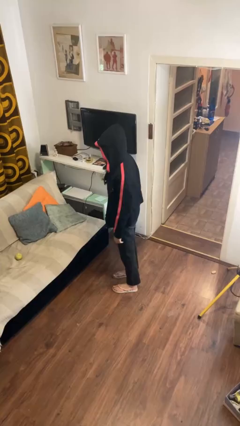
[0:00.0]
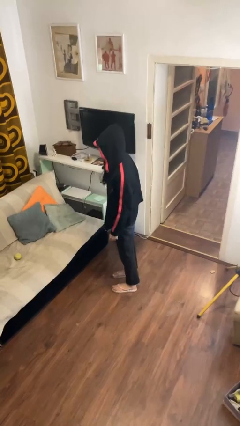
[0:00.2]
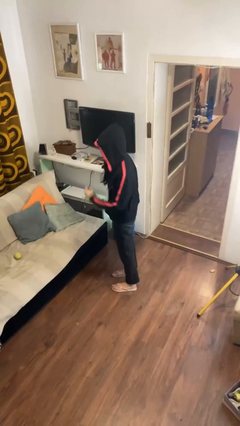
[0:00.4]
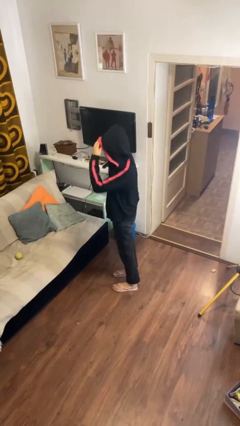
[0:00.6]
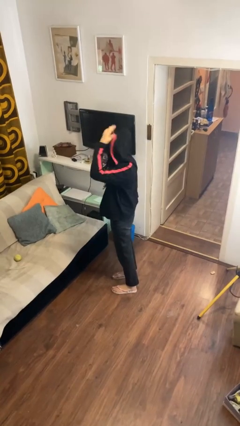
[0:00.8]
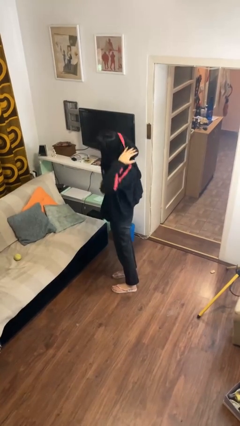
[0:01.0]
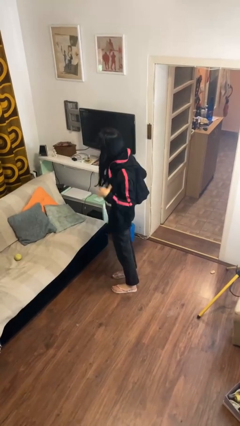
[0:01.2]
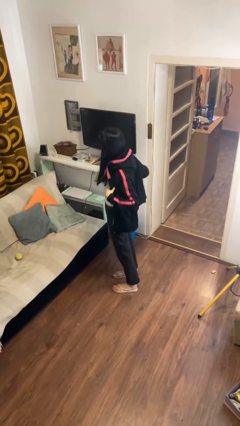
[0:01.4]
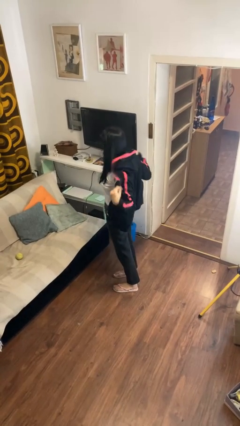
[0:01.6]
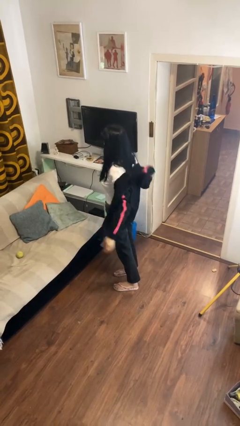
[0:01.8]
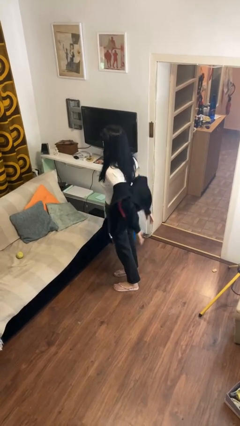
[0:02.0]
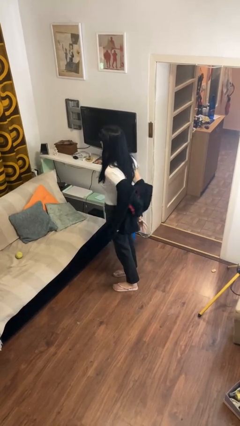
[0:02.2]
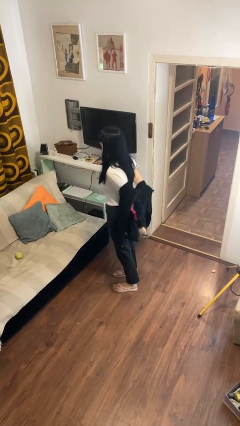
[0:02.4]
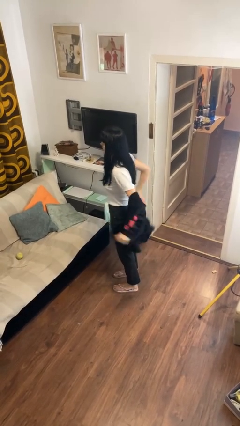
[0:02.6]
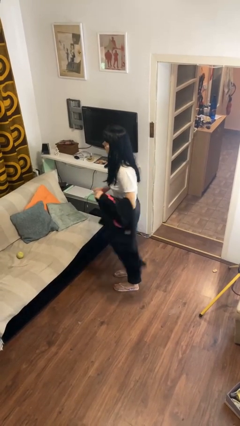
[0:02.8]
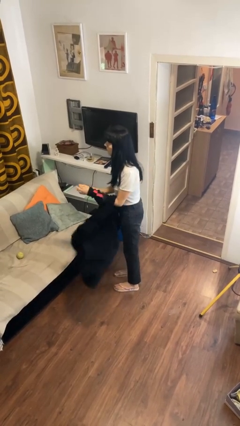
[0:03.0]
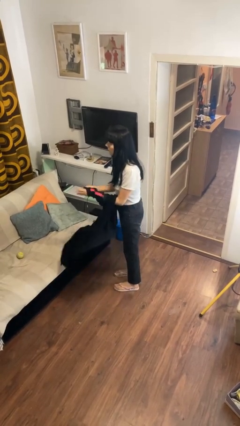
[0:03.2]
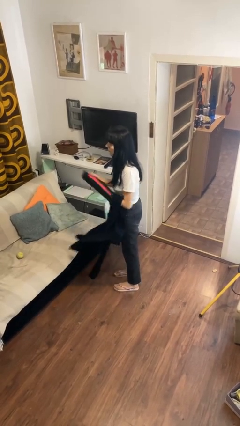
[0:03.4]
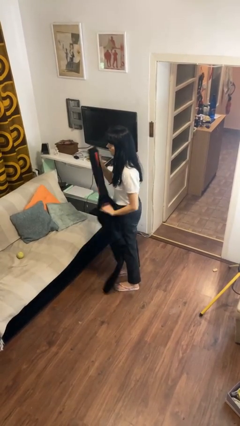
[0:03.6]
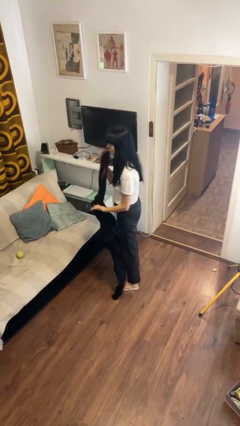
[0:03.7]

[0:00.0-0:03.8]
person takes off hoodie

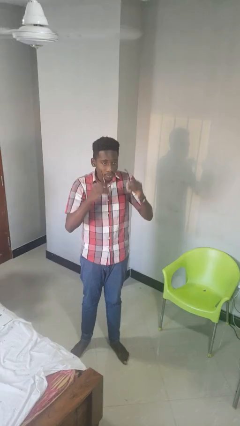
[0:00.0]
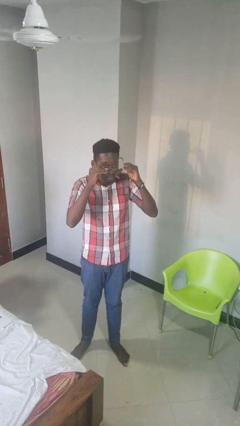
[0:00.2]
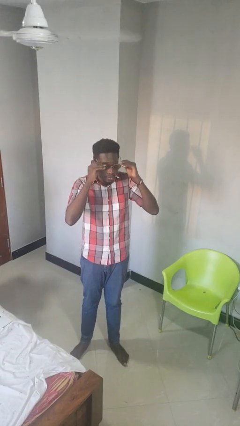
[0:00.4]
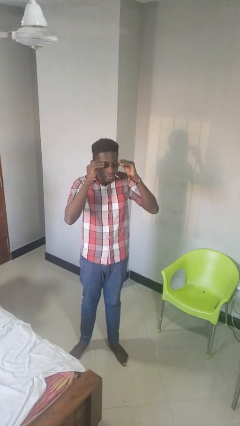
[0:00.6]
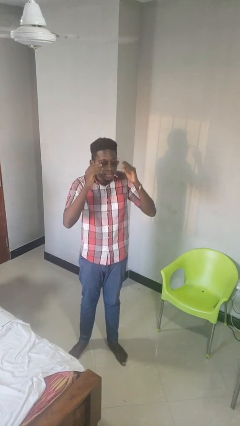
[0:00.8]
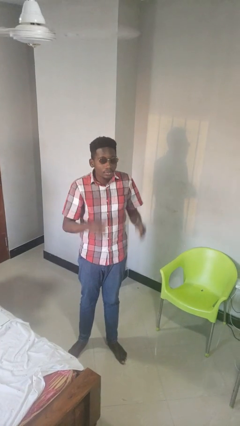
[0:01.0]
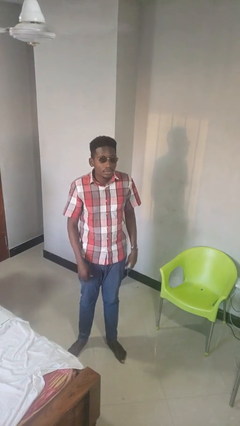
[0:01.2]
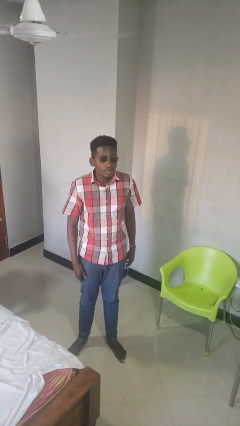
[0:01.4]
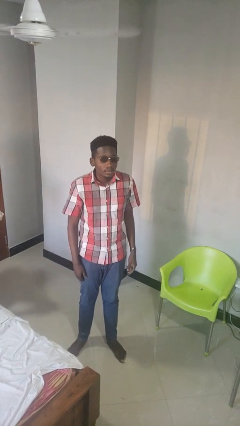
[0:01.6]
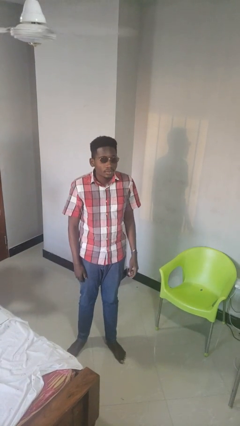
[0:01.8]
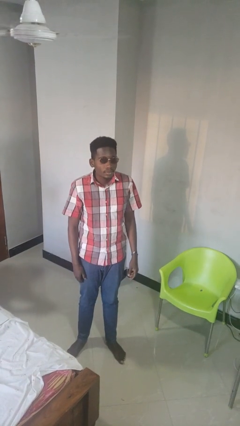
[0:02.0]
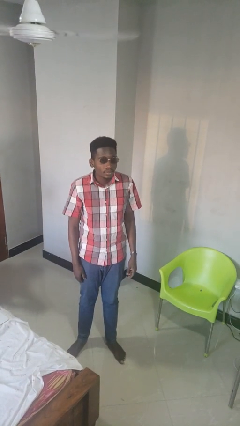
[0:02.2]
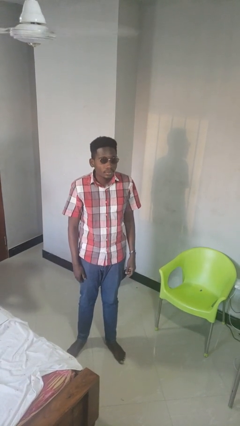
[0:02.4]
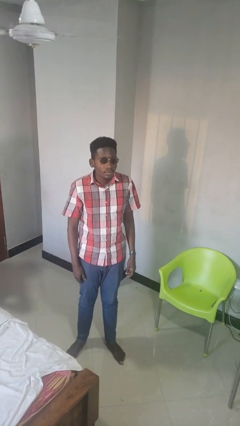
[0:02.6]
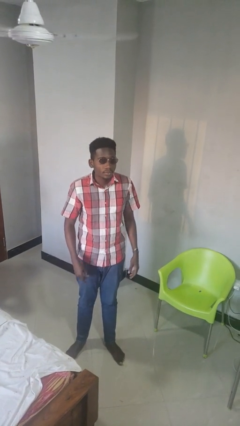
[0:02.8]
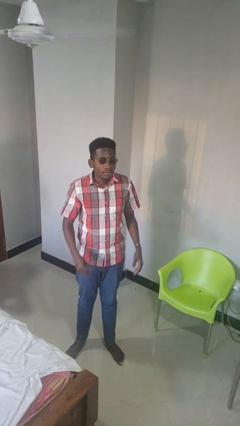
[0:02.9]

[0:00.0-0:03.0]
person puts on sunglasses

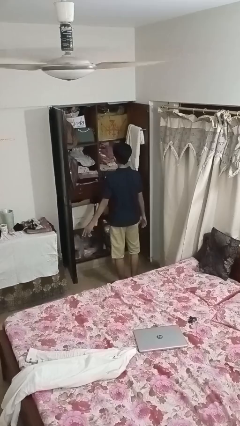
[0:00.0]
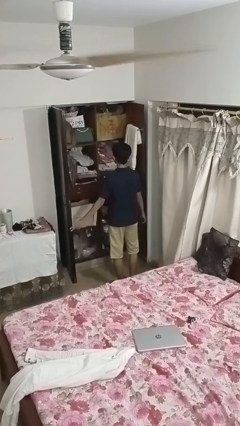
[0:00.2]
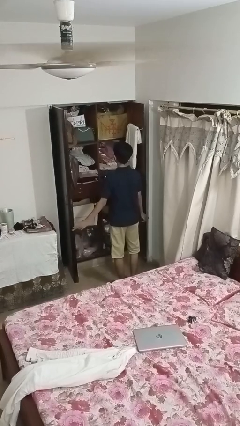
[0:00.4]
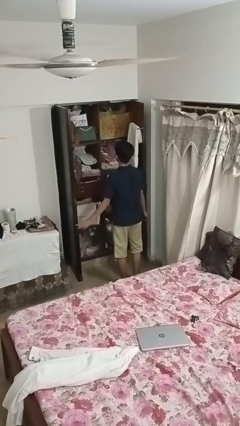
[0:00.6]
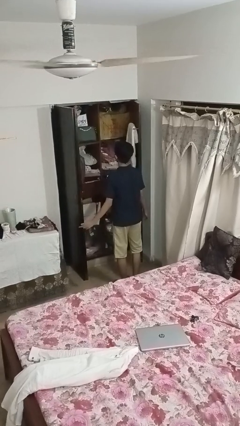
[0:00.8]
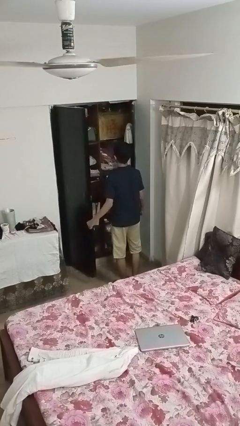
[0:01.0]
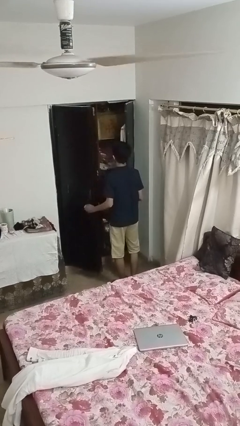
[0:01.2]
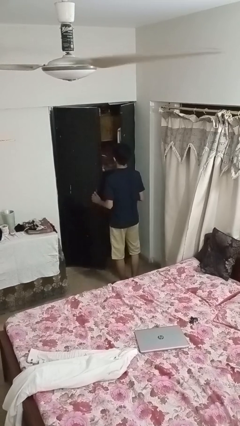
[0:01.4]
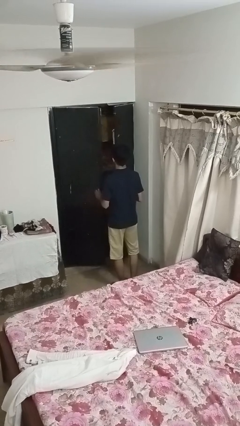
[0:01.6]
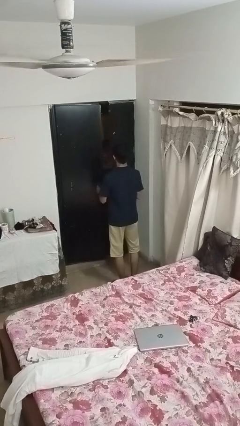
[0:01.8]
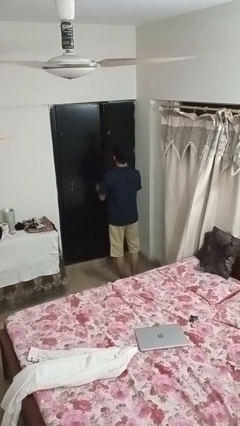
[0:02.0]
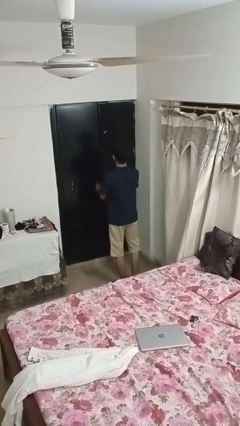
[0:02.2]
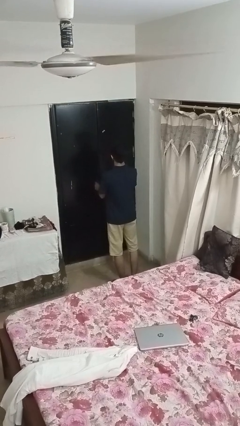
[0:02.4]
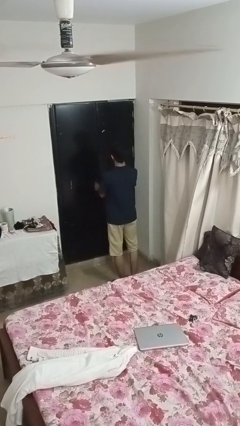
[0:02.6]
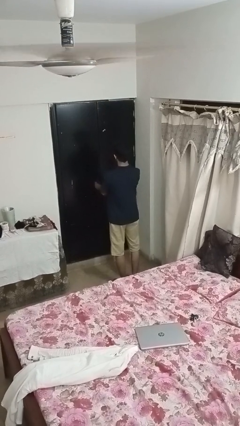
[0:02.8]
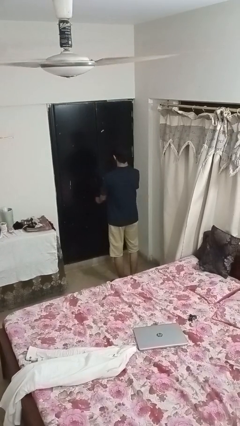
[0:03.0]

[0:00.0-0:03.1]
person closes closet door

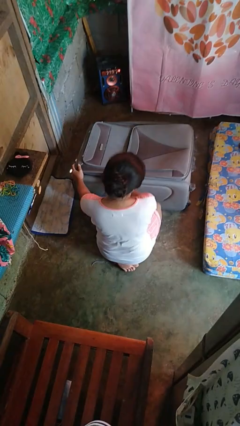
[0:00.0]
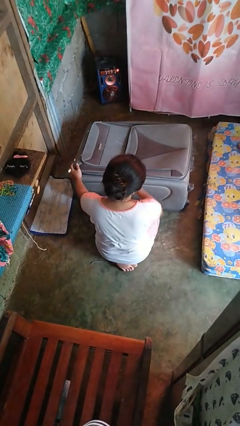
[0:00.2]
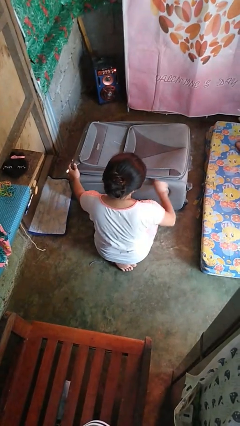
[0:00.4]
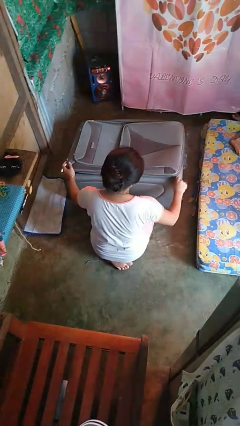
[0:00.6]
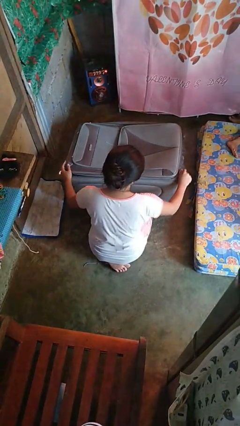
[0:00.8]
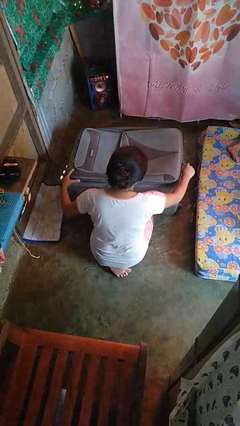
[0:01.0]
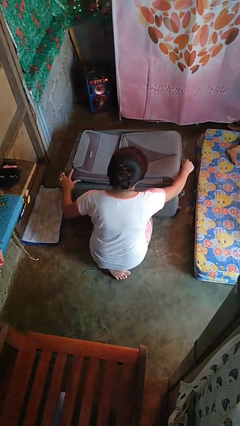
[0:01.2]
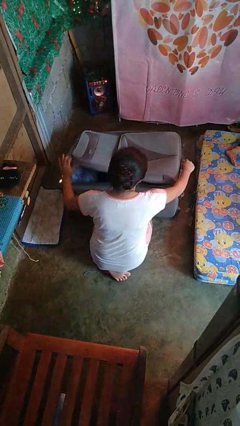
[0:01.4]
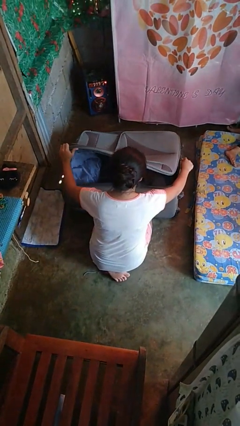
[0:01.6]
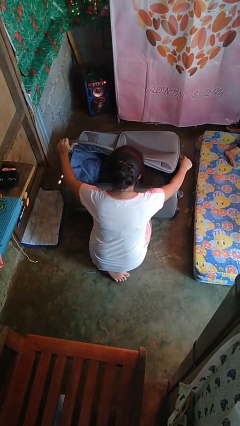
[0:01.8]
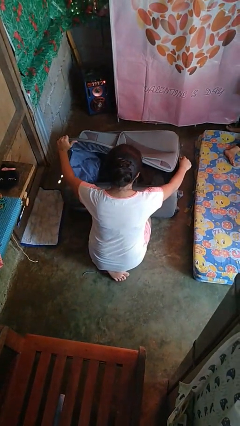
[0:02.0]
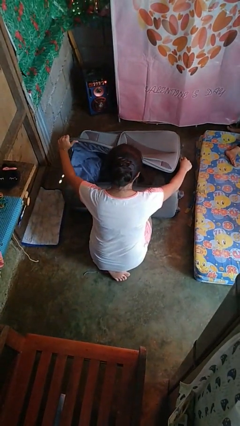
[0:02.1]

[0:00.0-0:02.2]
person opens suitcase

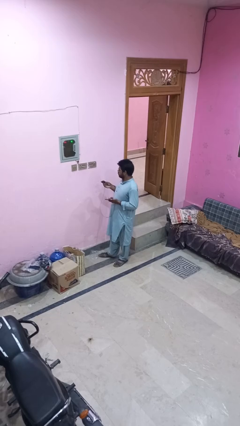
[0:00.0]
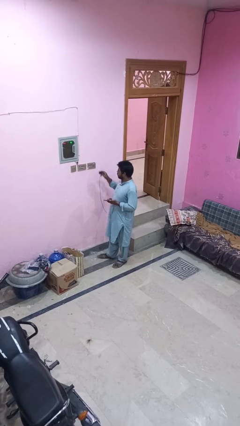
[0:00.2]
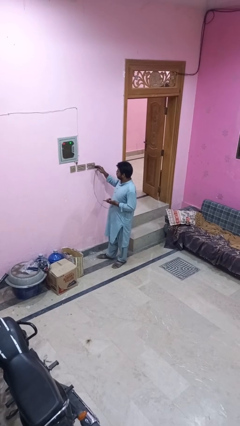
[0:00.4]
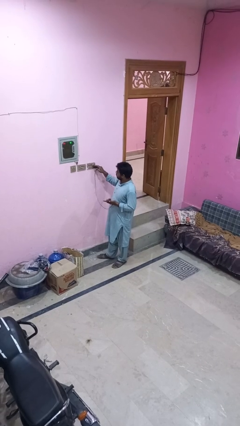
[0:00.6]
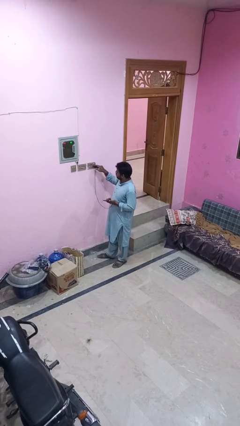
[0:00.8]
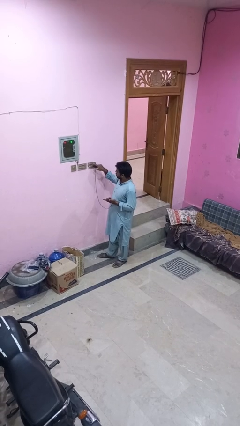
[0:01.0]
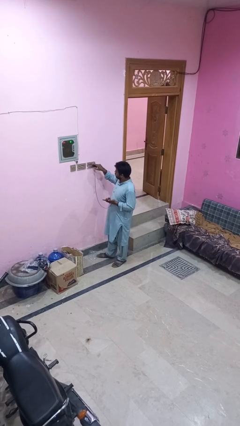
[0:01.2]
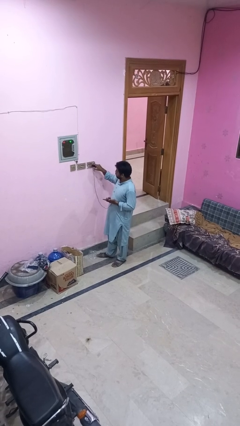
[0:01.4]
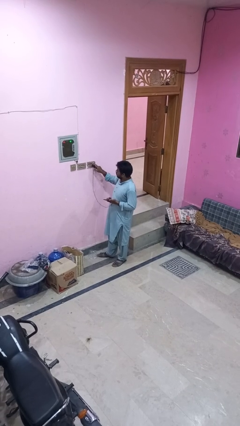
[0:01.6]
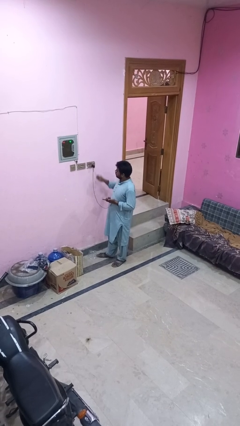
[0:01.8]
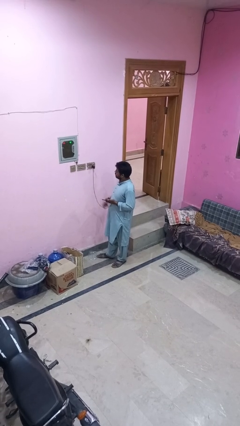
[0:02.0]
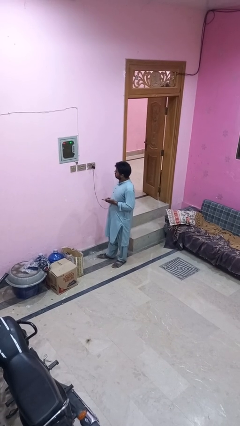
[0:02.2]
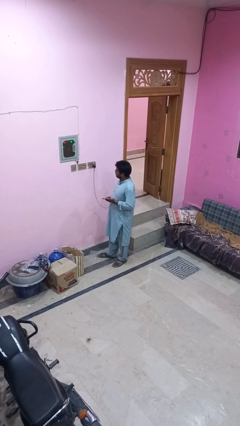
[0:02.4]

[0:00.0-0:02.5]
person plugs into electrical socket

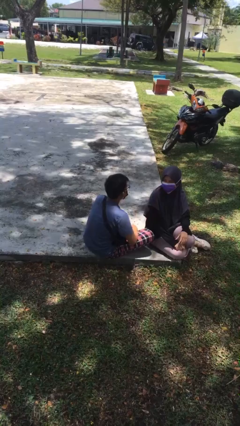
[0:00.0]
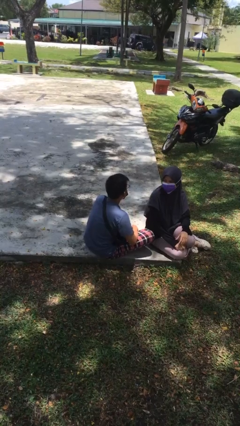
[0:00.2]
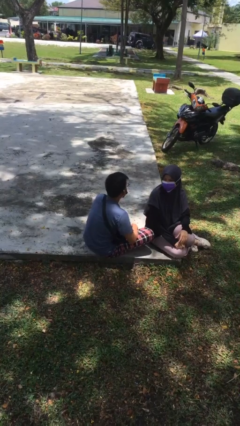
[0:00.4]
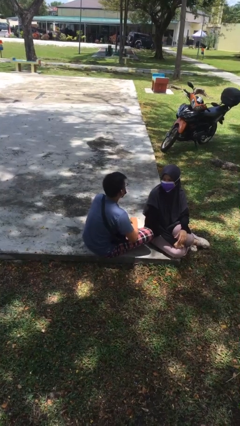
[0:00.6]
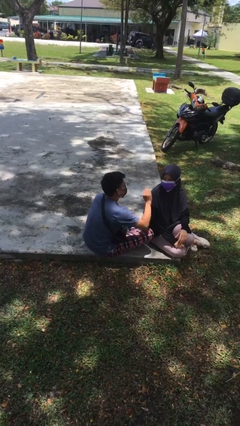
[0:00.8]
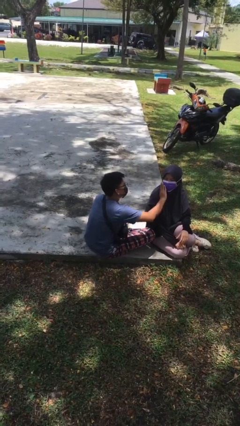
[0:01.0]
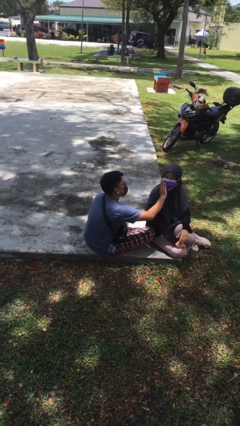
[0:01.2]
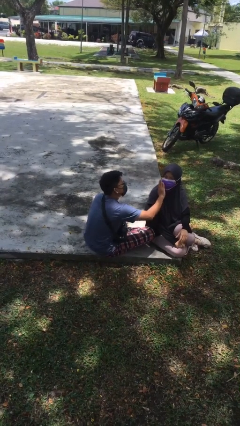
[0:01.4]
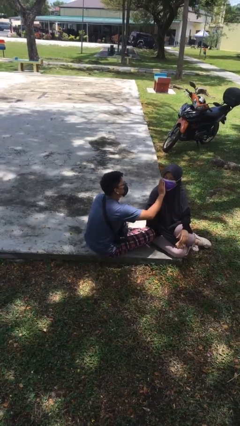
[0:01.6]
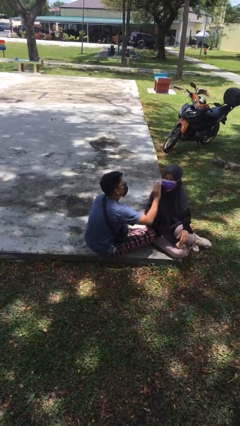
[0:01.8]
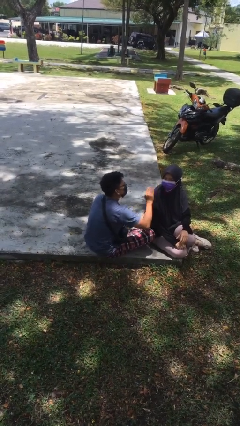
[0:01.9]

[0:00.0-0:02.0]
person touches face of person

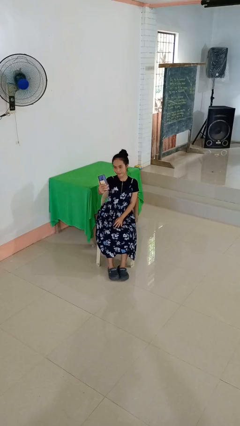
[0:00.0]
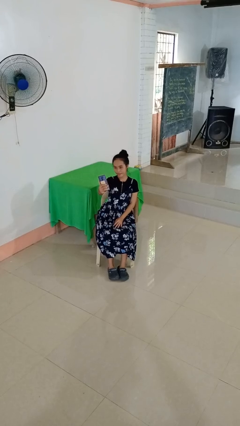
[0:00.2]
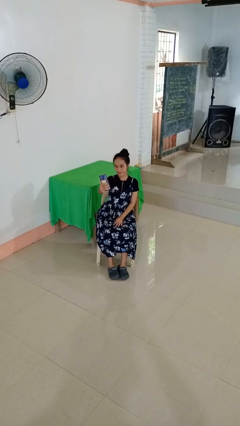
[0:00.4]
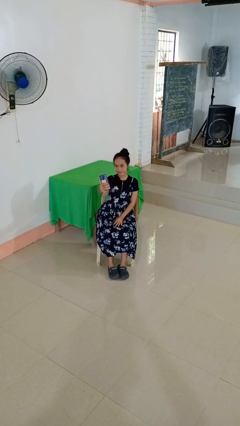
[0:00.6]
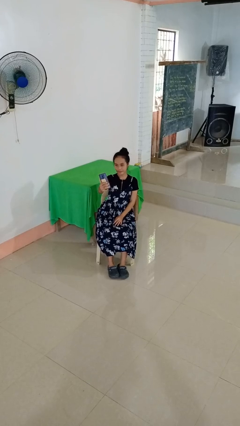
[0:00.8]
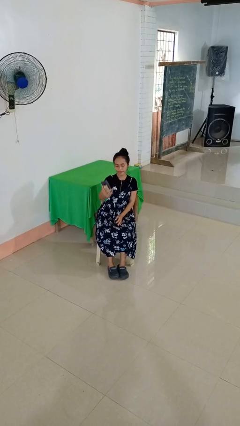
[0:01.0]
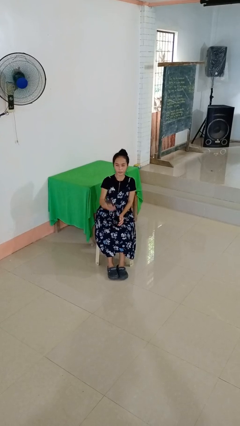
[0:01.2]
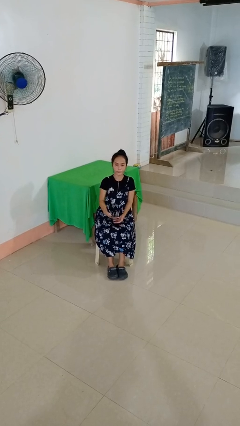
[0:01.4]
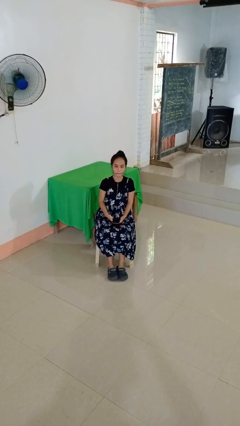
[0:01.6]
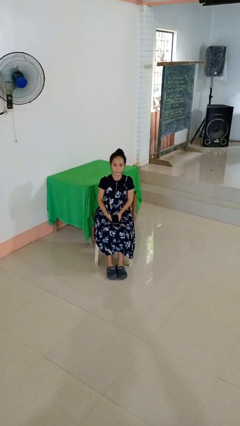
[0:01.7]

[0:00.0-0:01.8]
person takes selfie
